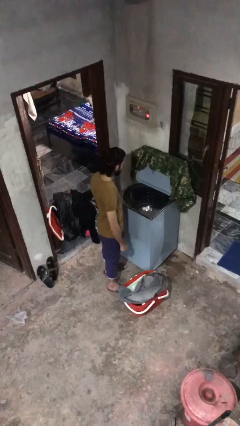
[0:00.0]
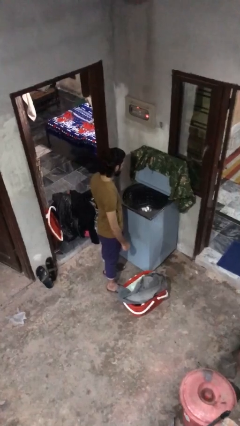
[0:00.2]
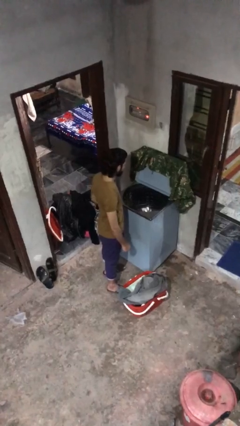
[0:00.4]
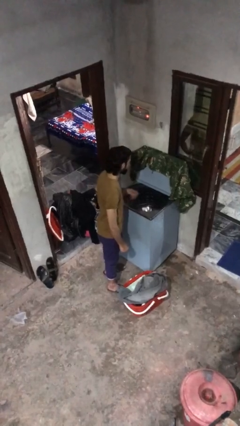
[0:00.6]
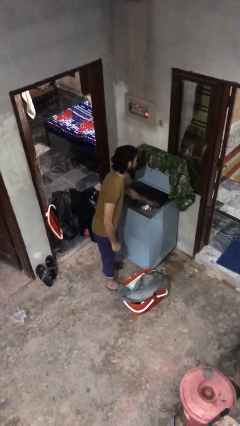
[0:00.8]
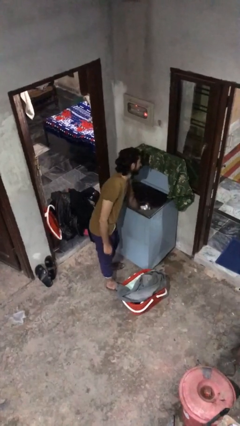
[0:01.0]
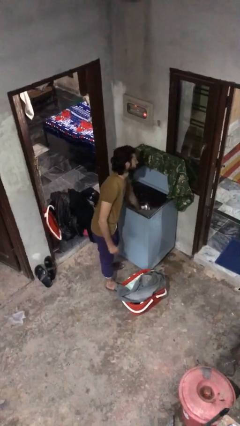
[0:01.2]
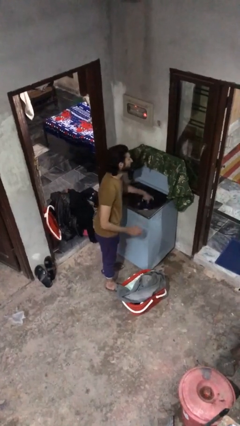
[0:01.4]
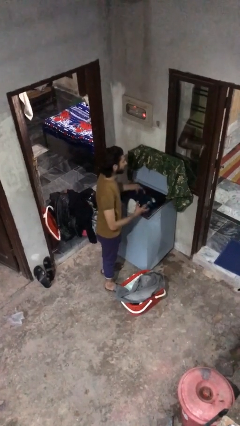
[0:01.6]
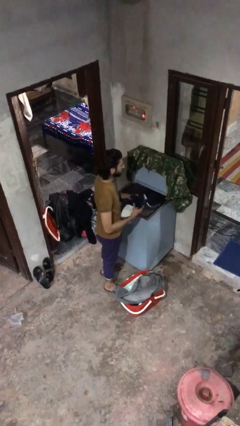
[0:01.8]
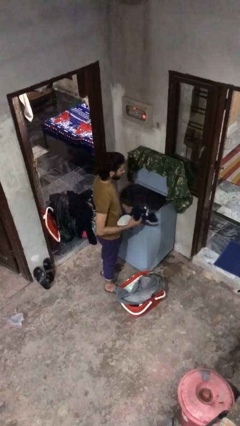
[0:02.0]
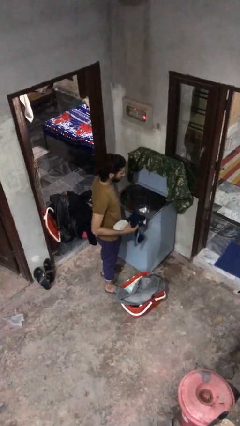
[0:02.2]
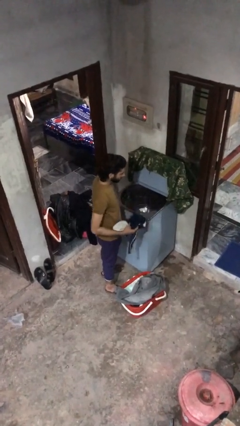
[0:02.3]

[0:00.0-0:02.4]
person loads clotheswasher

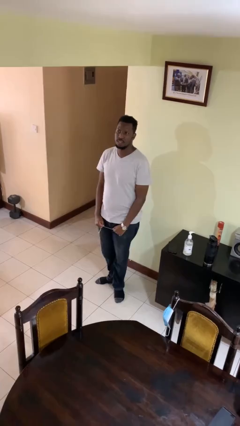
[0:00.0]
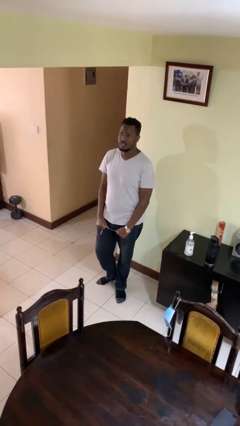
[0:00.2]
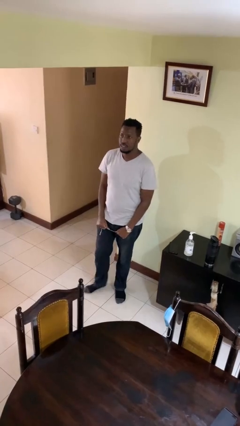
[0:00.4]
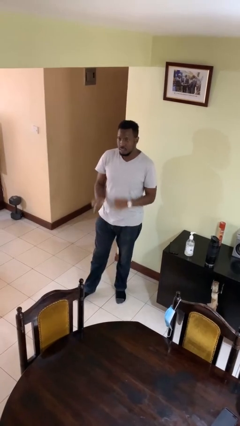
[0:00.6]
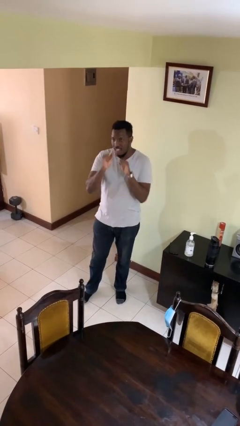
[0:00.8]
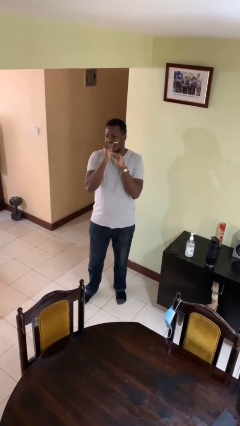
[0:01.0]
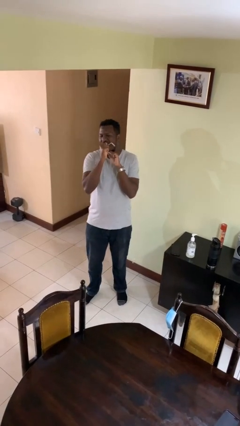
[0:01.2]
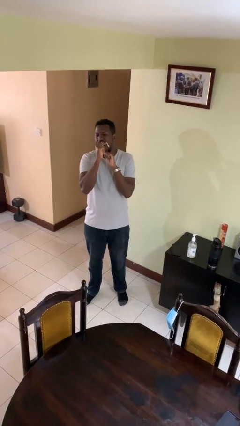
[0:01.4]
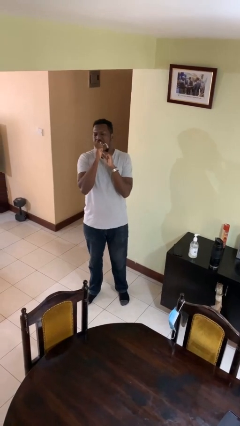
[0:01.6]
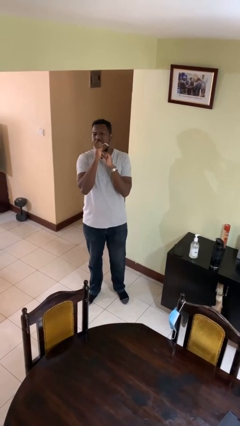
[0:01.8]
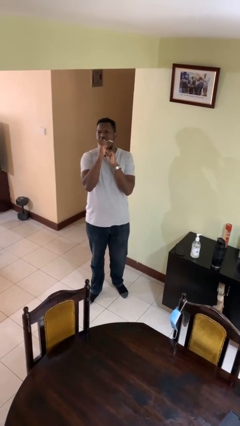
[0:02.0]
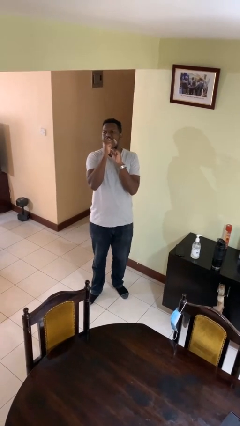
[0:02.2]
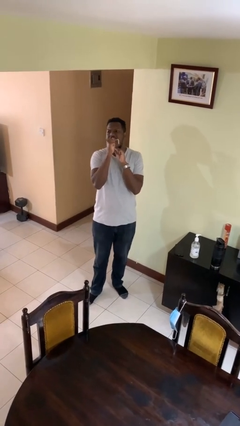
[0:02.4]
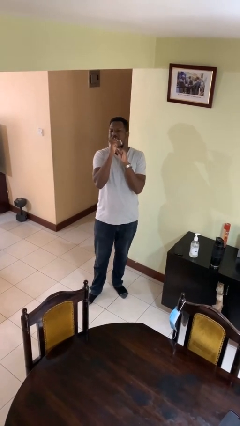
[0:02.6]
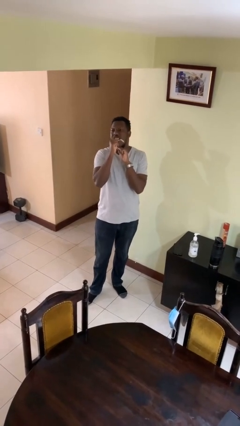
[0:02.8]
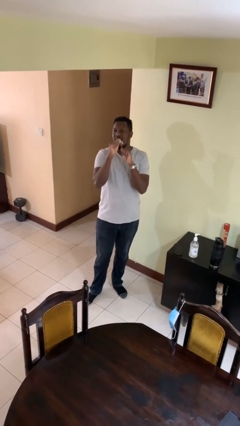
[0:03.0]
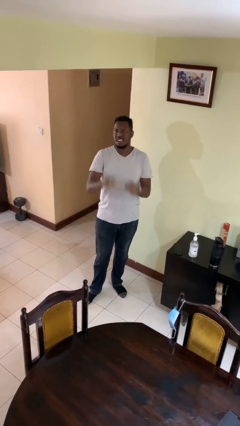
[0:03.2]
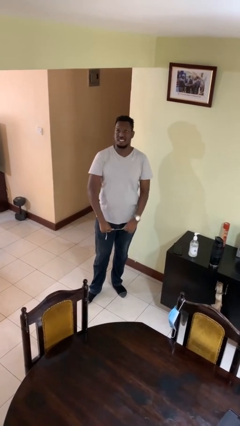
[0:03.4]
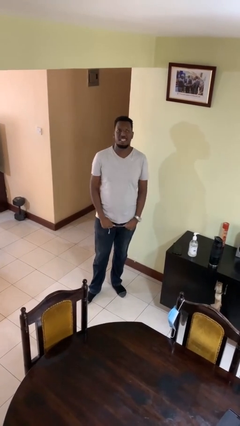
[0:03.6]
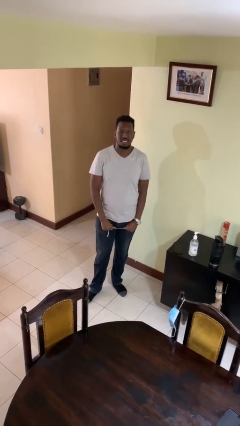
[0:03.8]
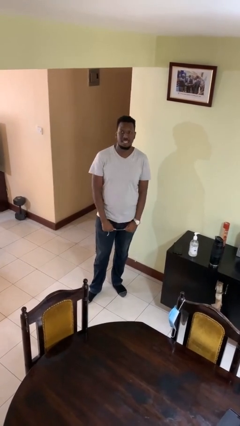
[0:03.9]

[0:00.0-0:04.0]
person flosses

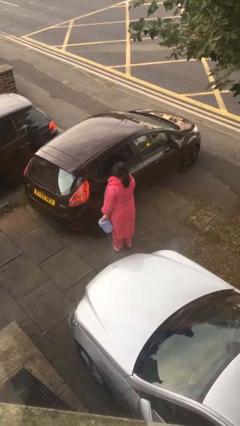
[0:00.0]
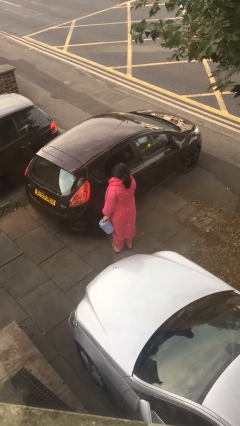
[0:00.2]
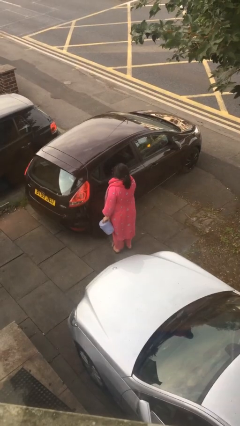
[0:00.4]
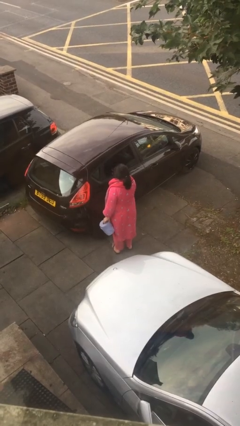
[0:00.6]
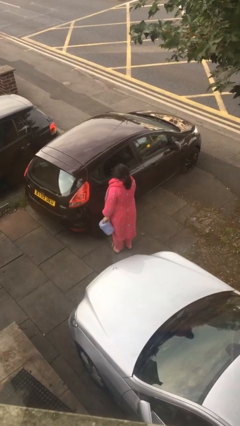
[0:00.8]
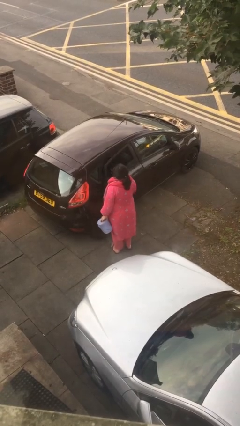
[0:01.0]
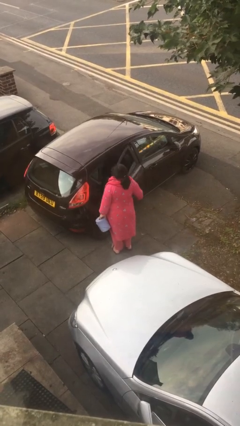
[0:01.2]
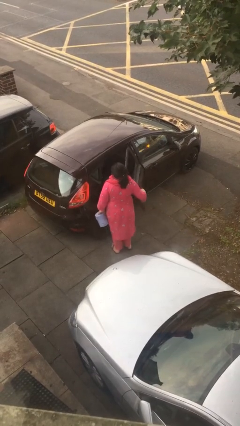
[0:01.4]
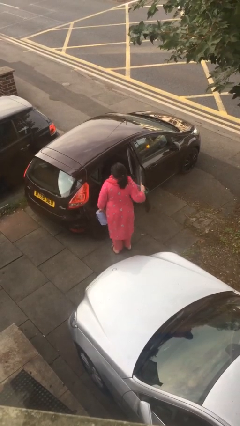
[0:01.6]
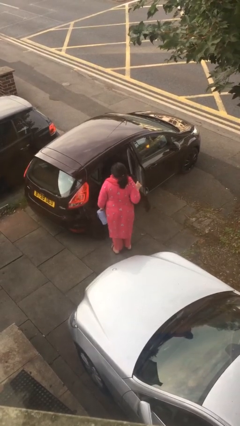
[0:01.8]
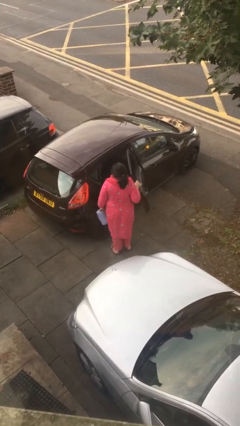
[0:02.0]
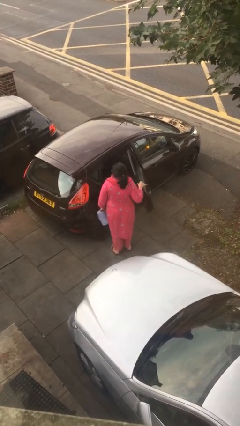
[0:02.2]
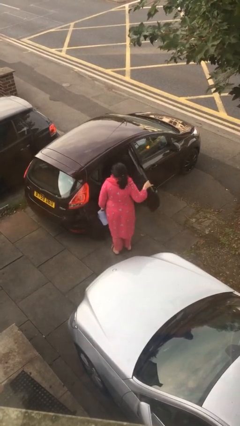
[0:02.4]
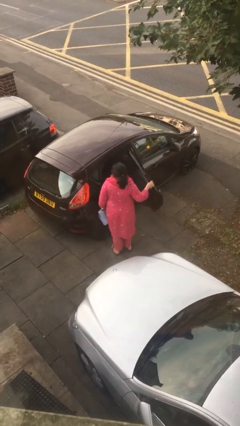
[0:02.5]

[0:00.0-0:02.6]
person opens car door

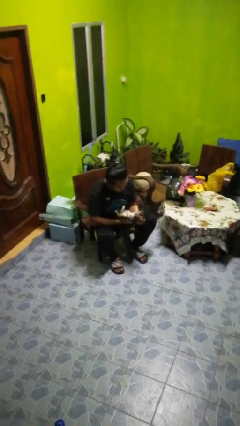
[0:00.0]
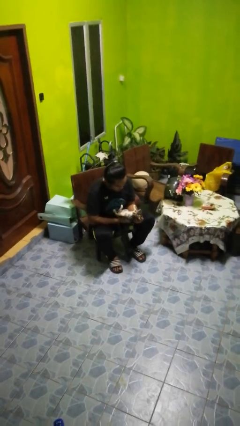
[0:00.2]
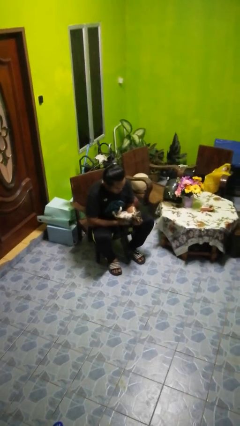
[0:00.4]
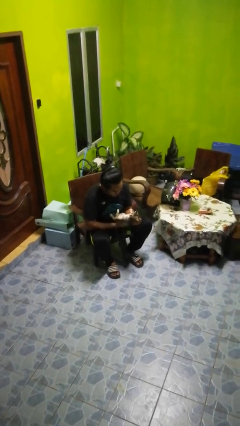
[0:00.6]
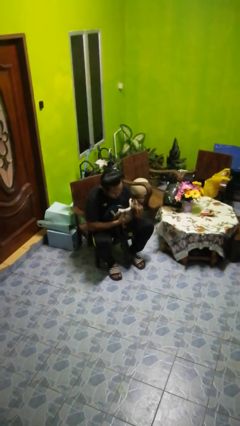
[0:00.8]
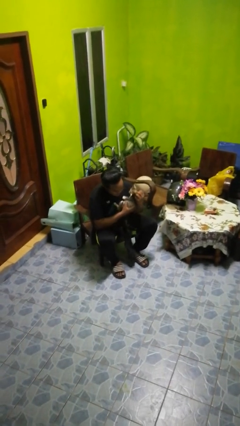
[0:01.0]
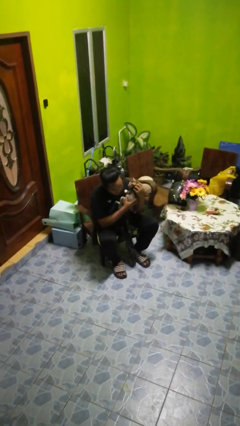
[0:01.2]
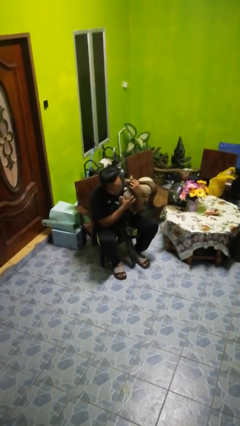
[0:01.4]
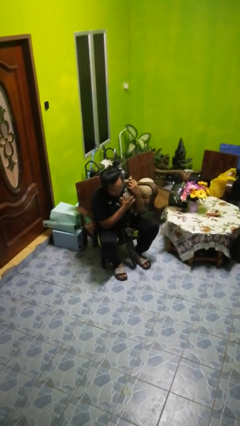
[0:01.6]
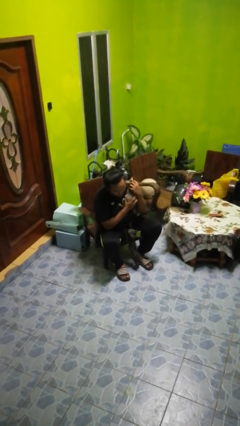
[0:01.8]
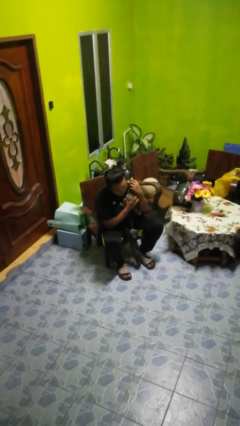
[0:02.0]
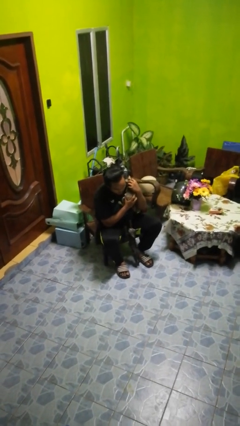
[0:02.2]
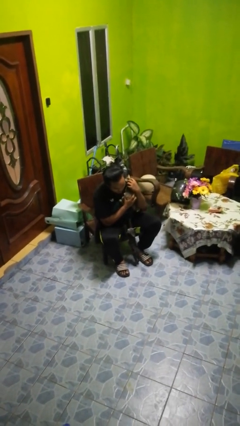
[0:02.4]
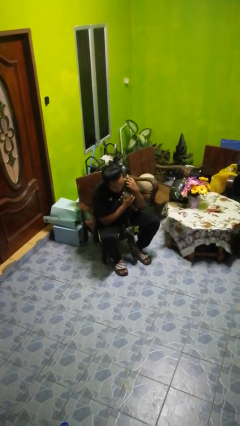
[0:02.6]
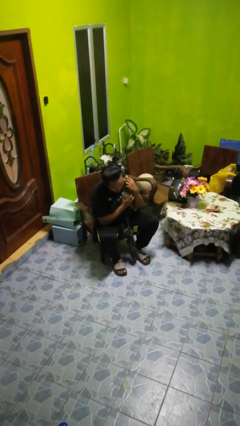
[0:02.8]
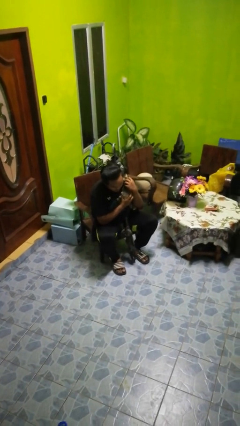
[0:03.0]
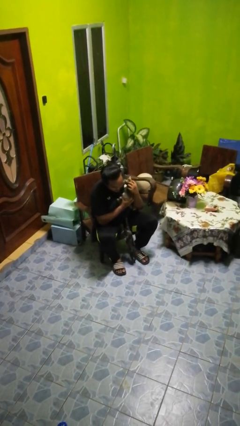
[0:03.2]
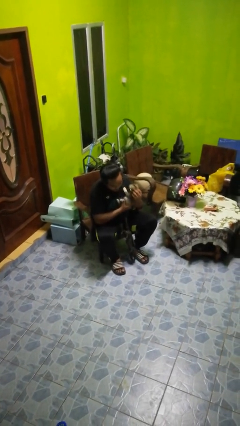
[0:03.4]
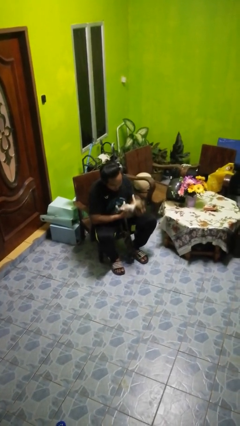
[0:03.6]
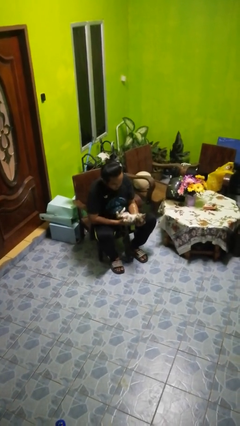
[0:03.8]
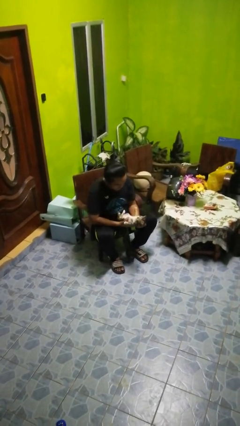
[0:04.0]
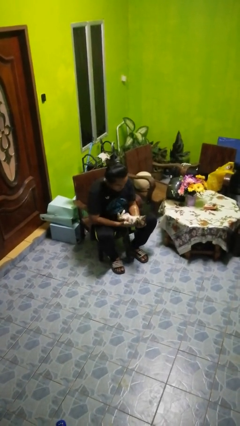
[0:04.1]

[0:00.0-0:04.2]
person hugs cat

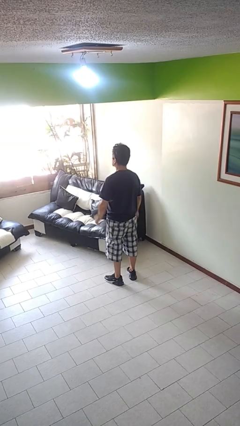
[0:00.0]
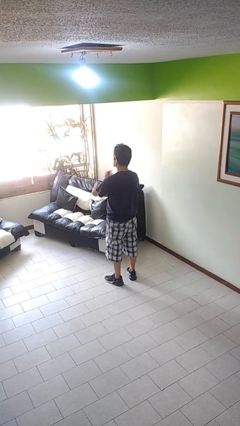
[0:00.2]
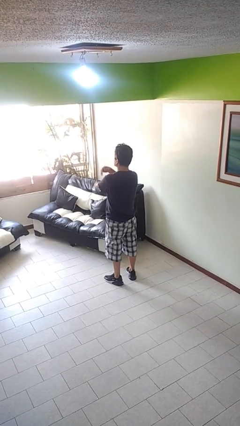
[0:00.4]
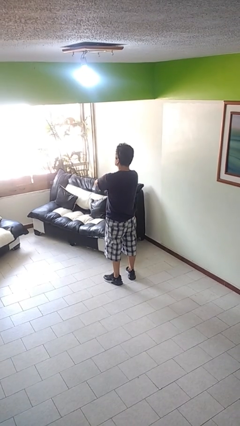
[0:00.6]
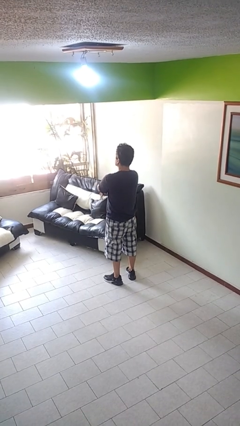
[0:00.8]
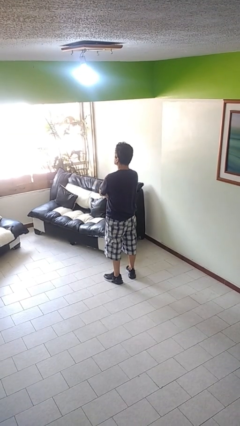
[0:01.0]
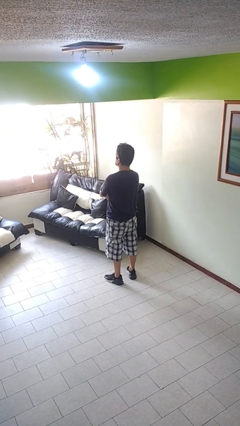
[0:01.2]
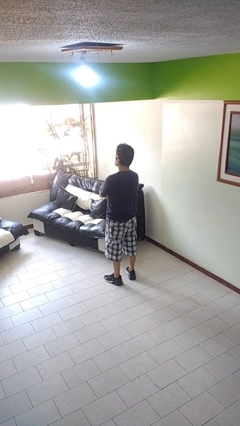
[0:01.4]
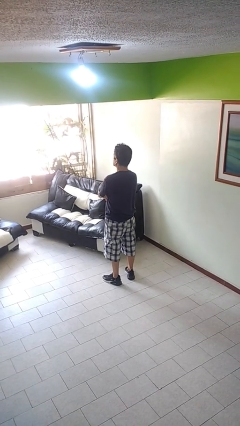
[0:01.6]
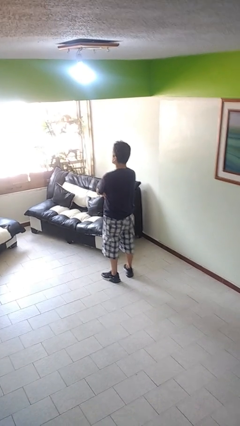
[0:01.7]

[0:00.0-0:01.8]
person crosses arms

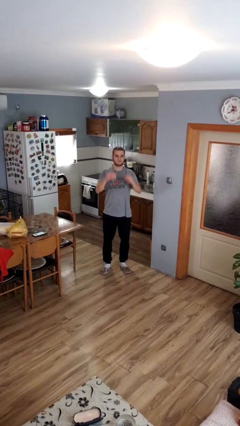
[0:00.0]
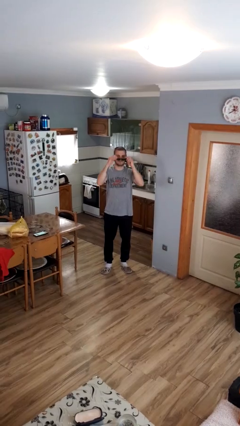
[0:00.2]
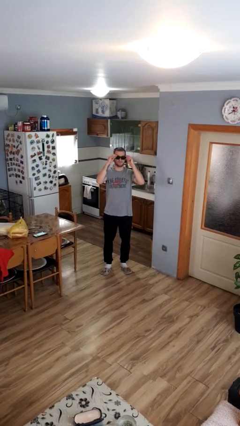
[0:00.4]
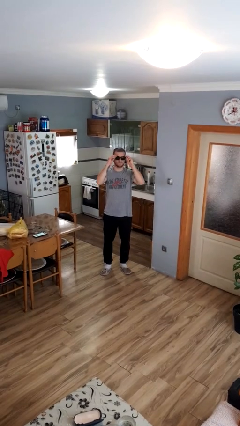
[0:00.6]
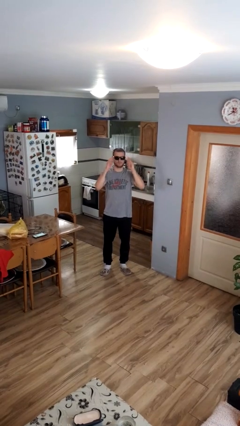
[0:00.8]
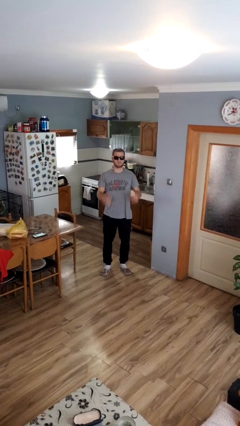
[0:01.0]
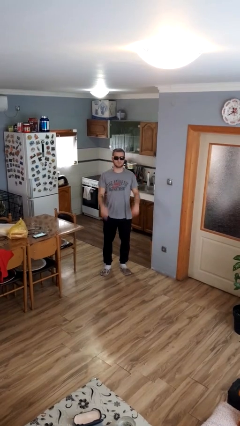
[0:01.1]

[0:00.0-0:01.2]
person puts on sunglasses

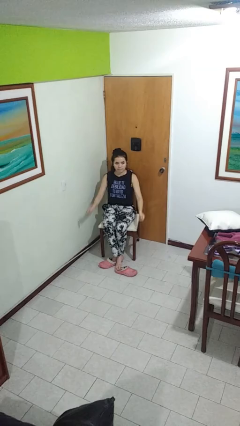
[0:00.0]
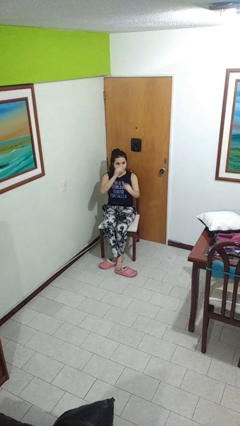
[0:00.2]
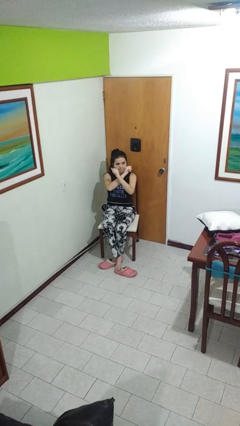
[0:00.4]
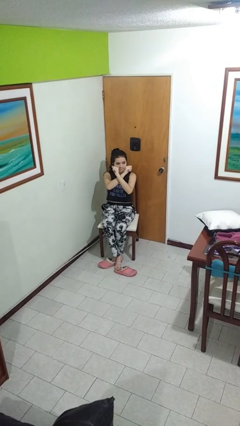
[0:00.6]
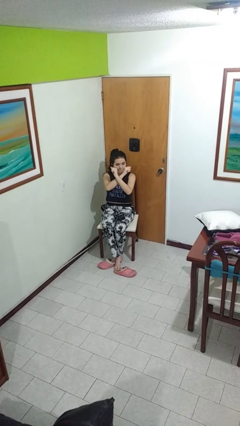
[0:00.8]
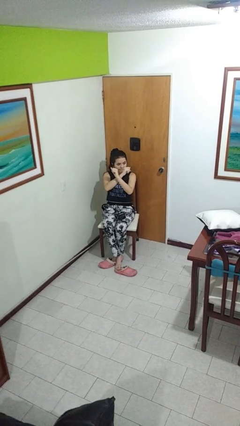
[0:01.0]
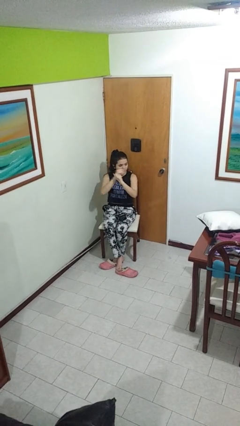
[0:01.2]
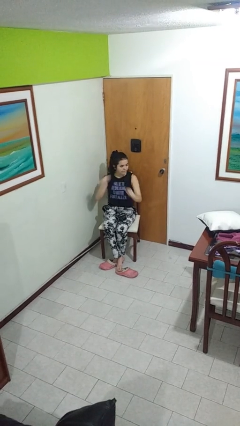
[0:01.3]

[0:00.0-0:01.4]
person gestures arms x
